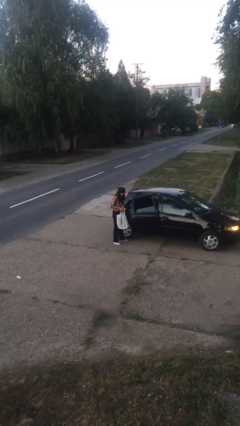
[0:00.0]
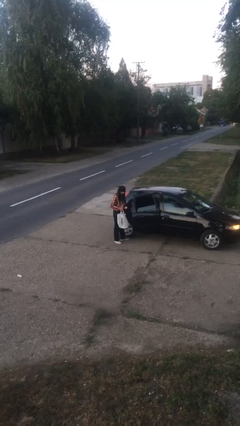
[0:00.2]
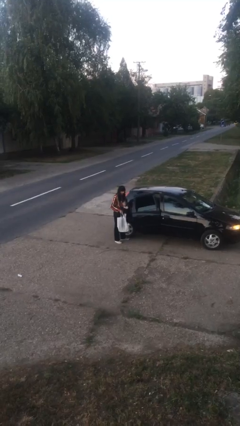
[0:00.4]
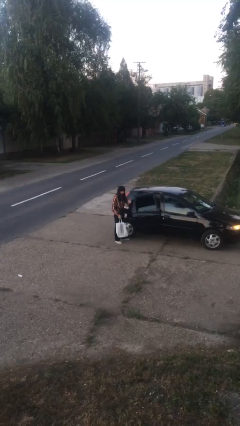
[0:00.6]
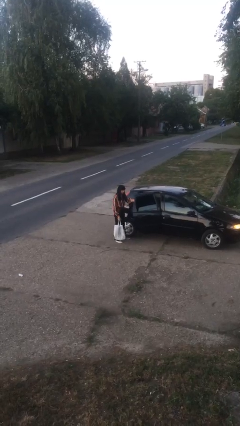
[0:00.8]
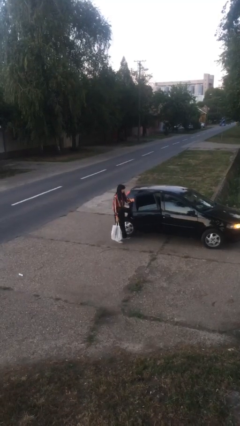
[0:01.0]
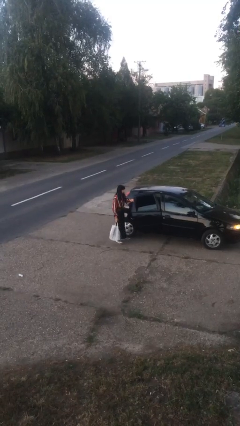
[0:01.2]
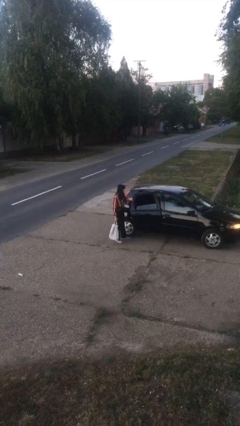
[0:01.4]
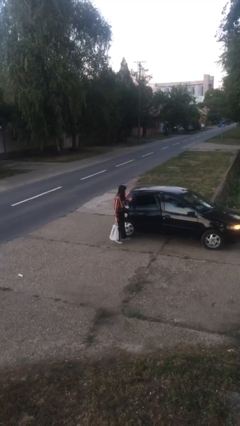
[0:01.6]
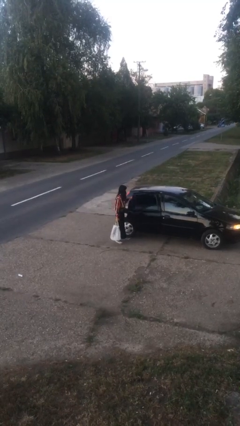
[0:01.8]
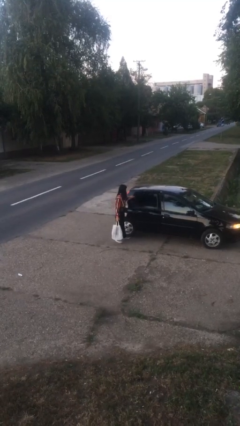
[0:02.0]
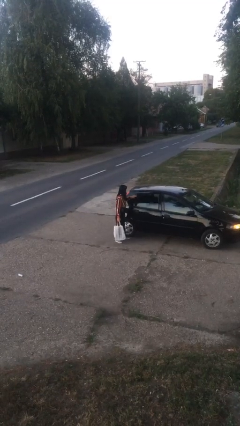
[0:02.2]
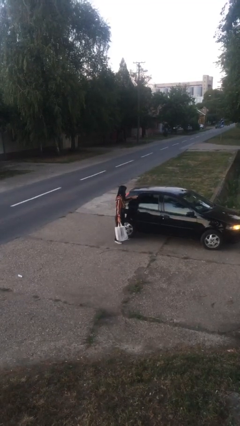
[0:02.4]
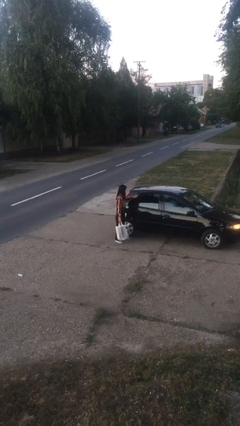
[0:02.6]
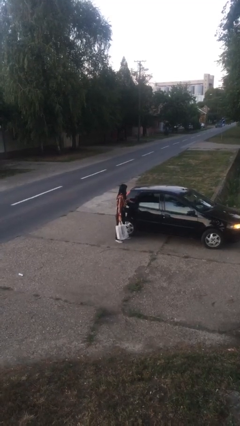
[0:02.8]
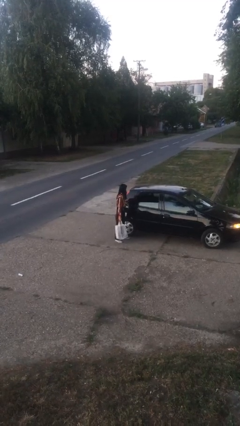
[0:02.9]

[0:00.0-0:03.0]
person closes car door

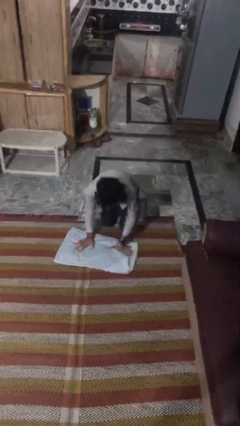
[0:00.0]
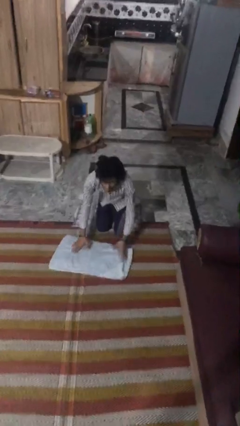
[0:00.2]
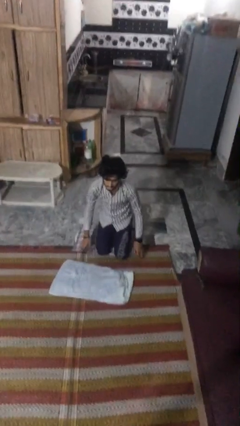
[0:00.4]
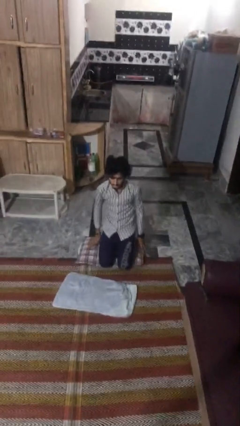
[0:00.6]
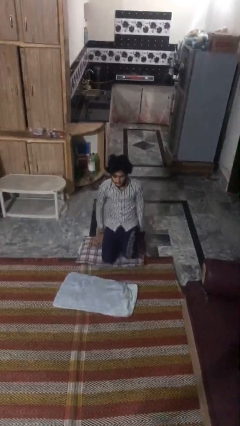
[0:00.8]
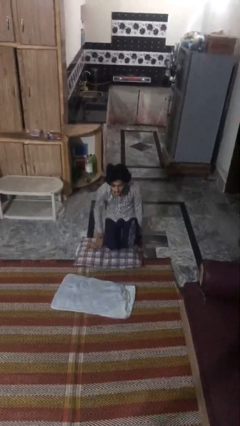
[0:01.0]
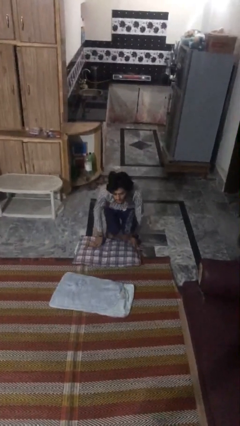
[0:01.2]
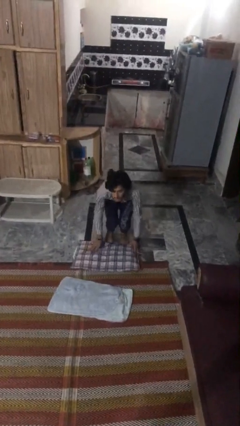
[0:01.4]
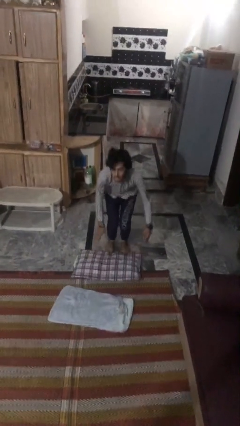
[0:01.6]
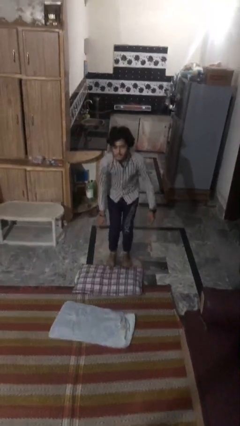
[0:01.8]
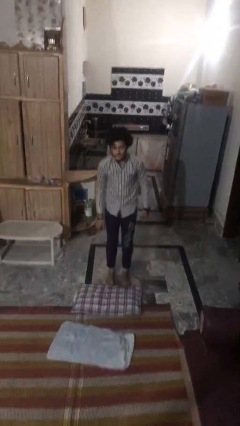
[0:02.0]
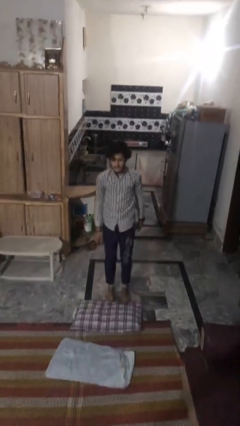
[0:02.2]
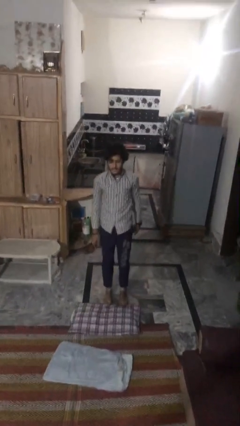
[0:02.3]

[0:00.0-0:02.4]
person stands up from floor

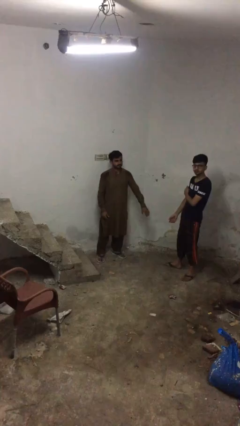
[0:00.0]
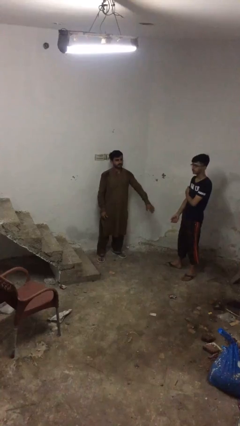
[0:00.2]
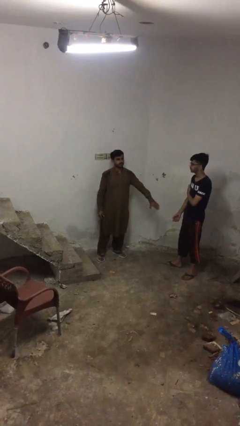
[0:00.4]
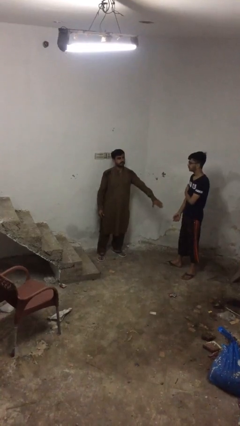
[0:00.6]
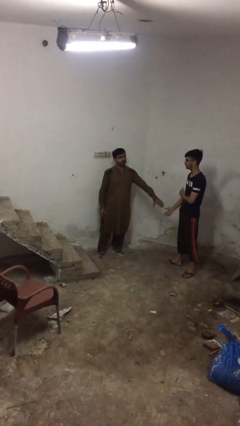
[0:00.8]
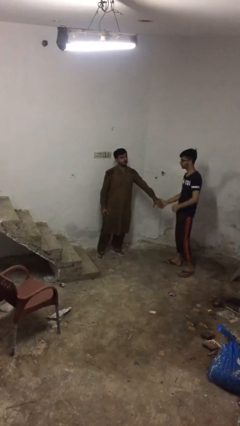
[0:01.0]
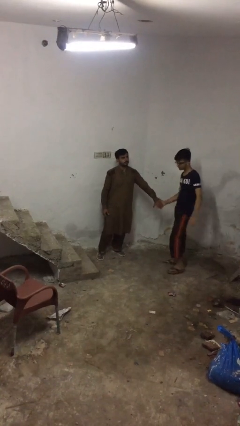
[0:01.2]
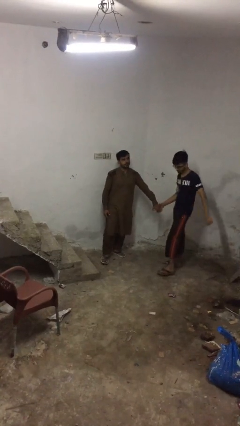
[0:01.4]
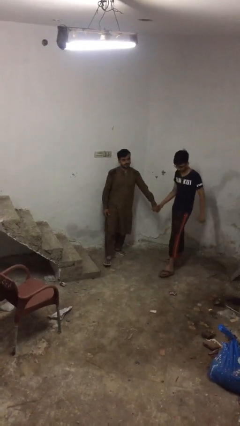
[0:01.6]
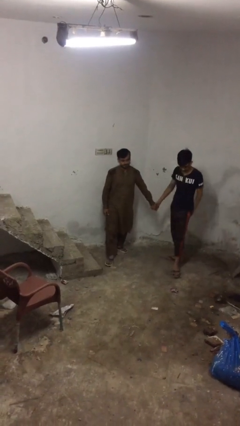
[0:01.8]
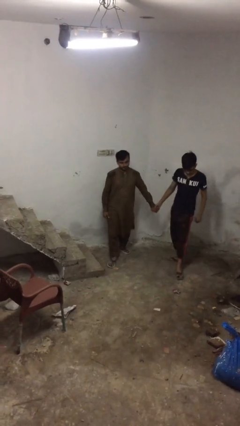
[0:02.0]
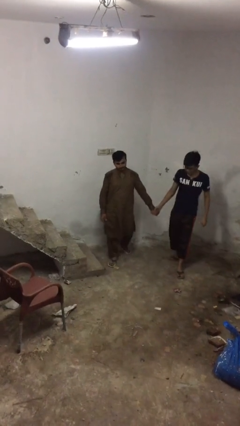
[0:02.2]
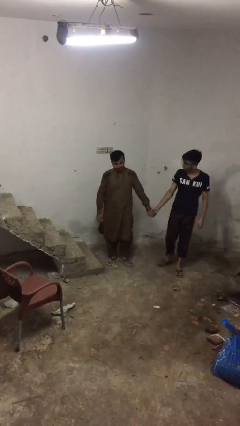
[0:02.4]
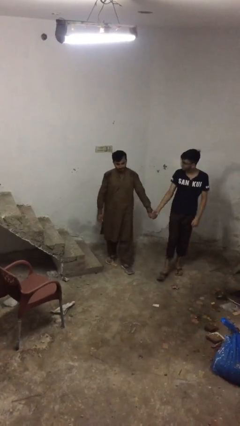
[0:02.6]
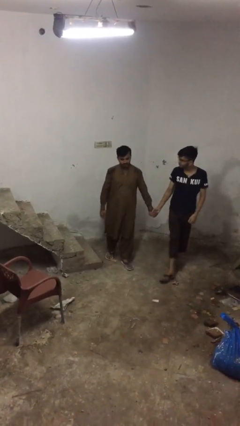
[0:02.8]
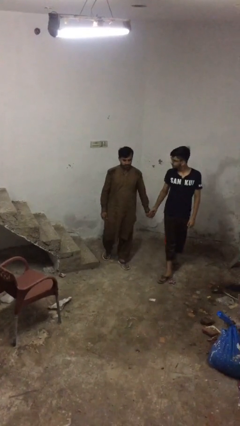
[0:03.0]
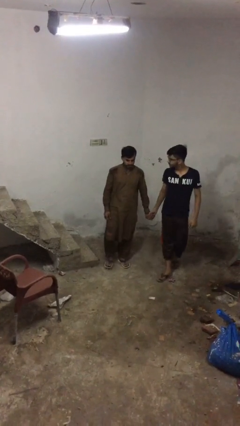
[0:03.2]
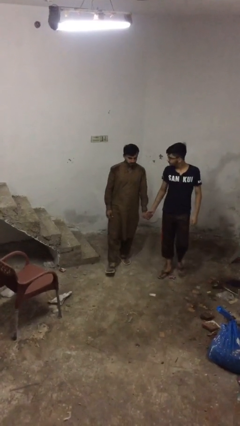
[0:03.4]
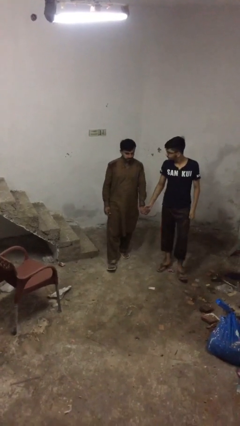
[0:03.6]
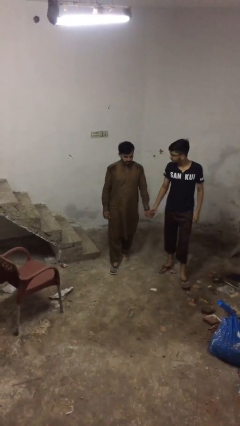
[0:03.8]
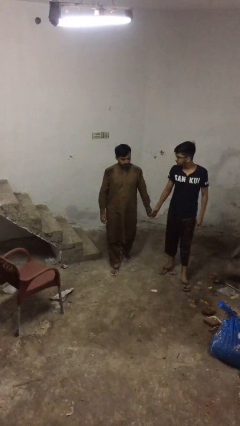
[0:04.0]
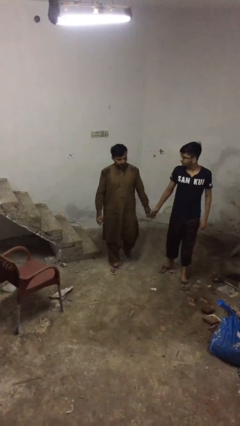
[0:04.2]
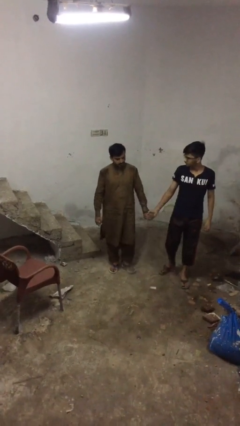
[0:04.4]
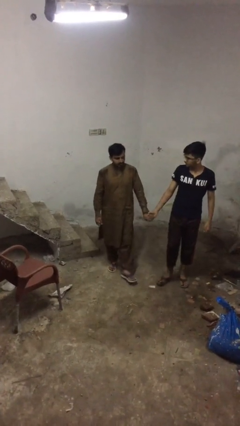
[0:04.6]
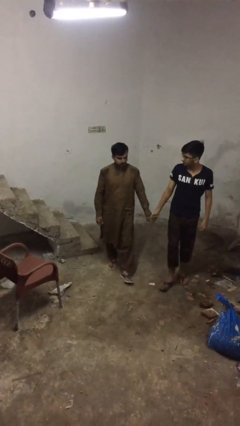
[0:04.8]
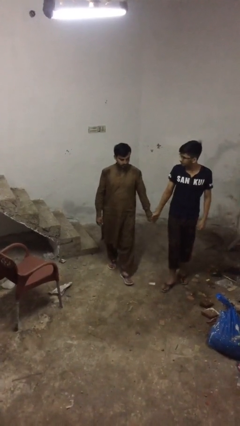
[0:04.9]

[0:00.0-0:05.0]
person holds hand

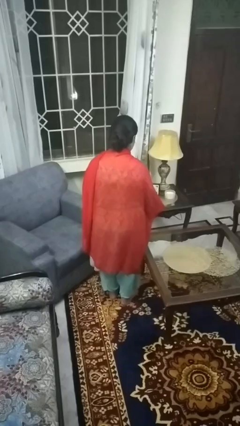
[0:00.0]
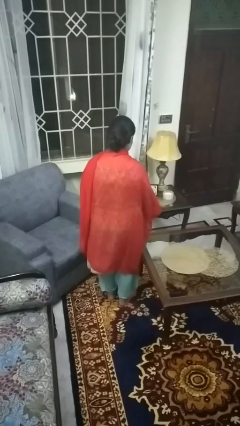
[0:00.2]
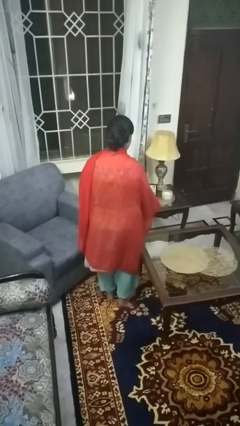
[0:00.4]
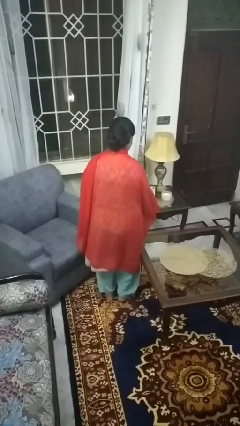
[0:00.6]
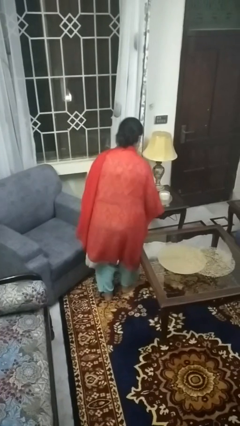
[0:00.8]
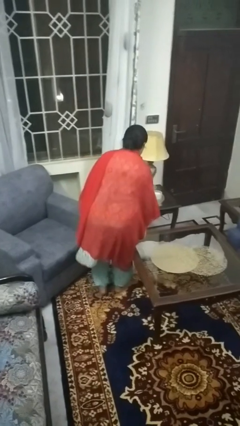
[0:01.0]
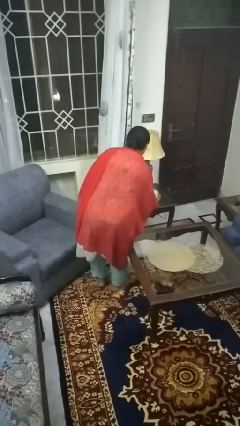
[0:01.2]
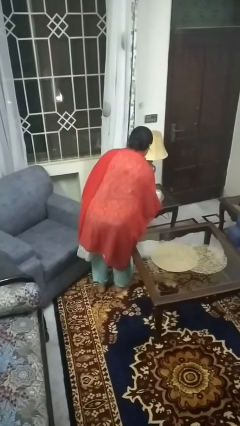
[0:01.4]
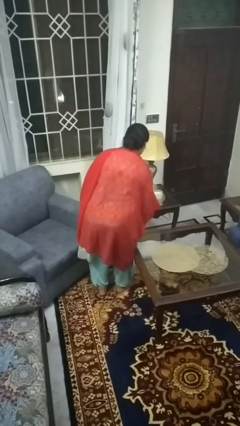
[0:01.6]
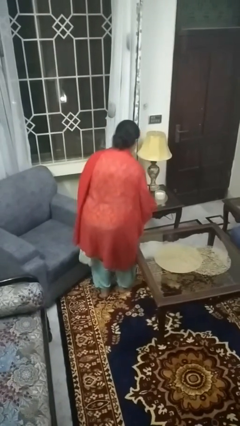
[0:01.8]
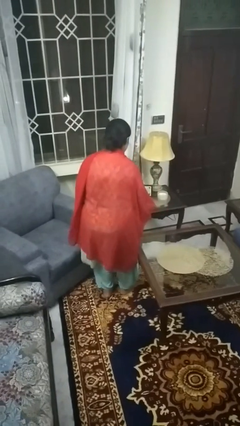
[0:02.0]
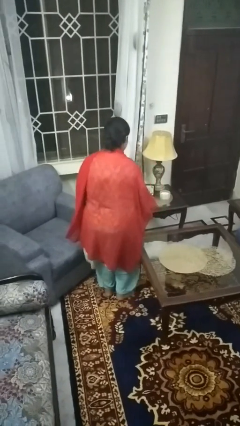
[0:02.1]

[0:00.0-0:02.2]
person bumps into table

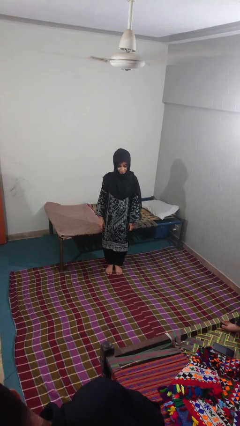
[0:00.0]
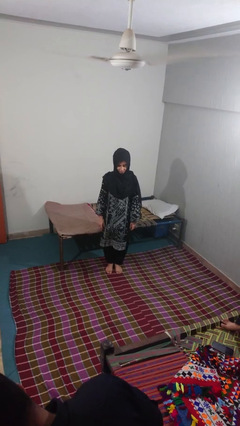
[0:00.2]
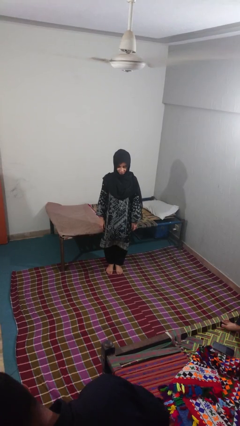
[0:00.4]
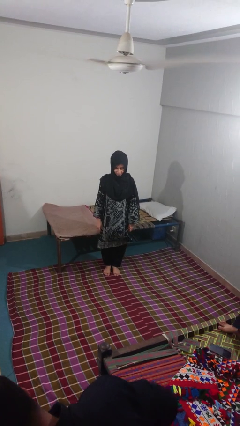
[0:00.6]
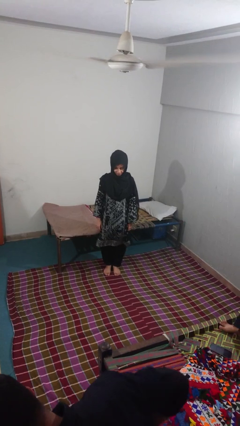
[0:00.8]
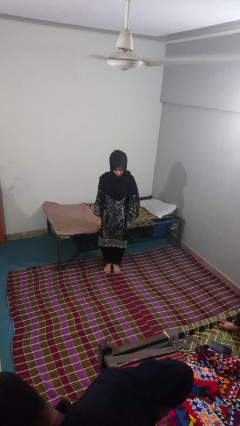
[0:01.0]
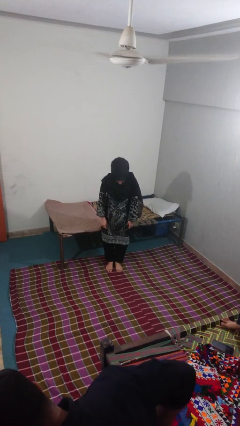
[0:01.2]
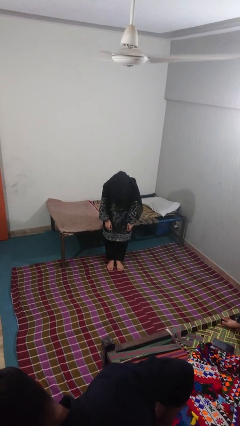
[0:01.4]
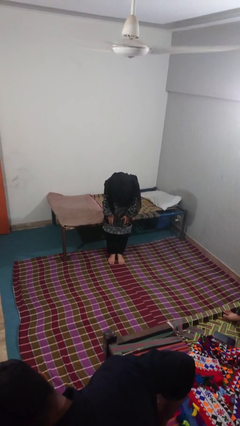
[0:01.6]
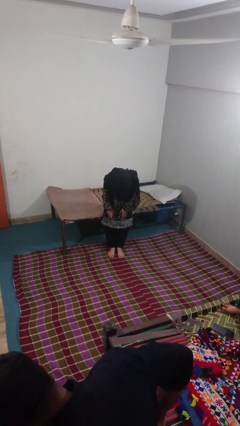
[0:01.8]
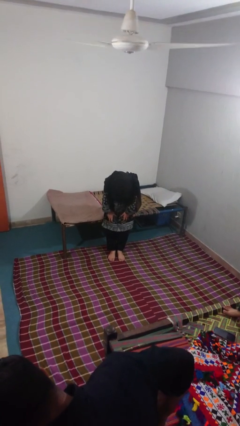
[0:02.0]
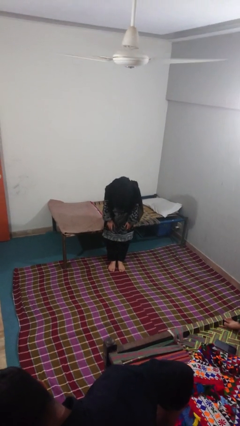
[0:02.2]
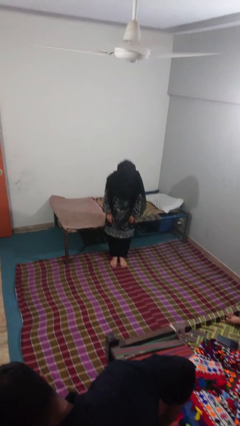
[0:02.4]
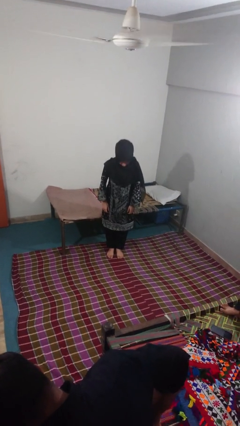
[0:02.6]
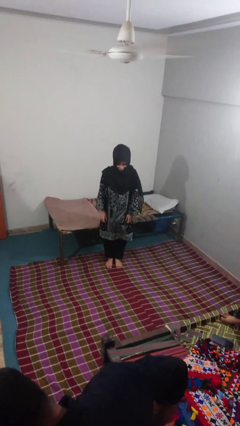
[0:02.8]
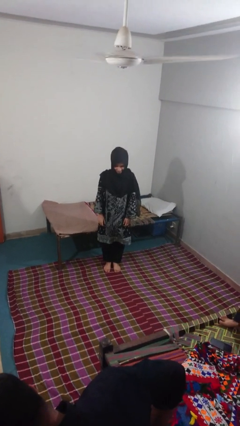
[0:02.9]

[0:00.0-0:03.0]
person bows

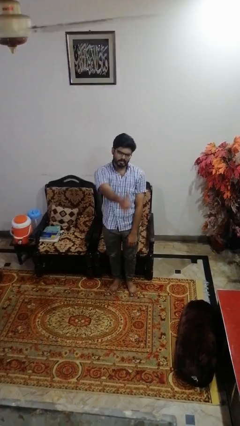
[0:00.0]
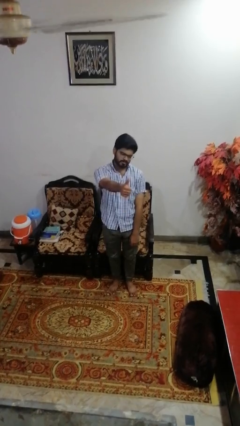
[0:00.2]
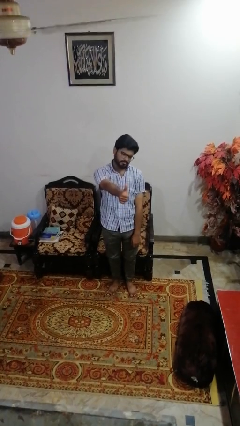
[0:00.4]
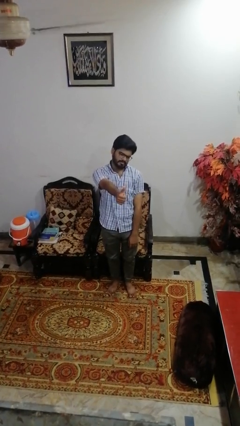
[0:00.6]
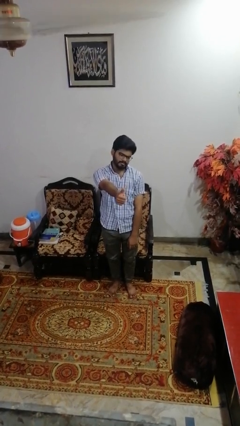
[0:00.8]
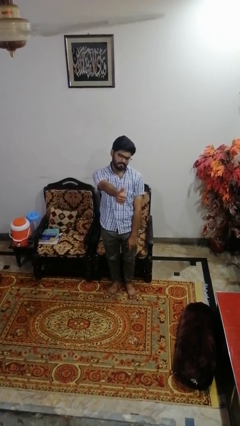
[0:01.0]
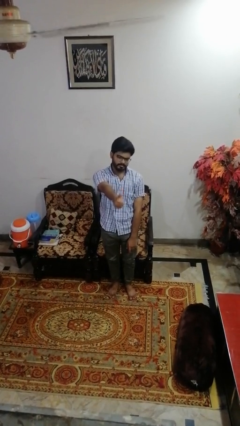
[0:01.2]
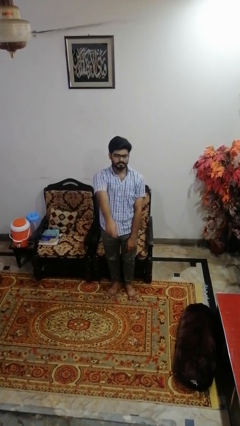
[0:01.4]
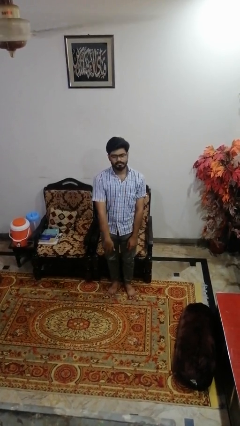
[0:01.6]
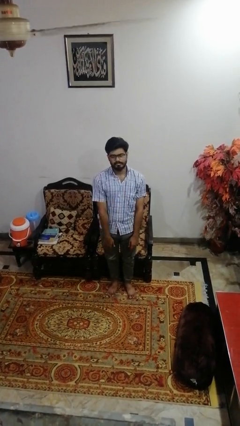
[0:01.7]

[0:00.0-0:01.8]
person gestures thumbs up
